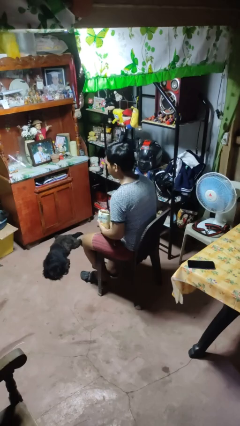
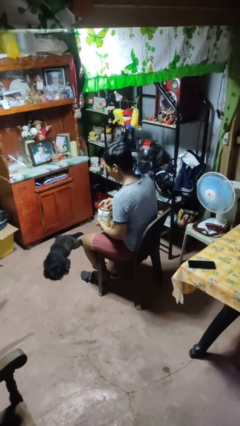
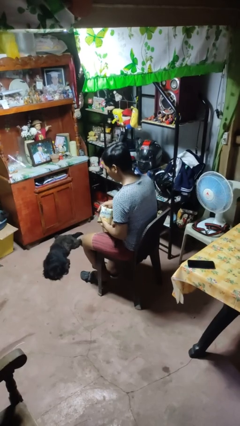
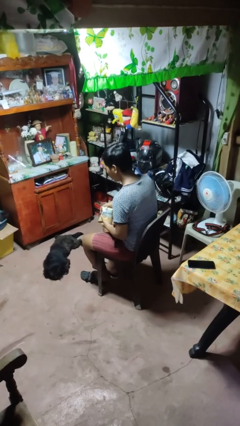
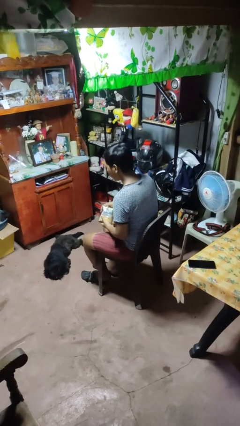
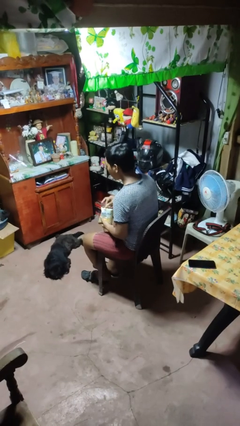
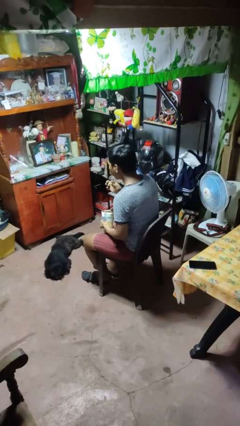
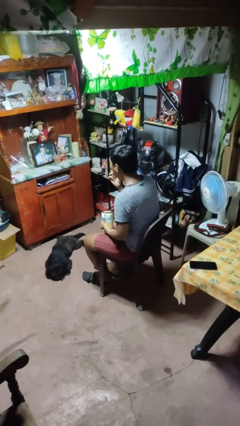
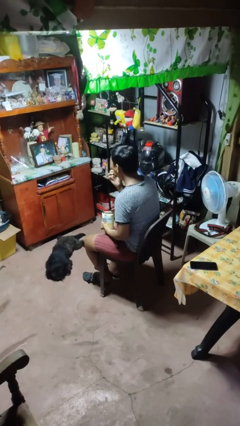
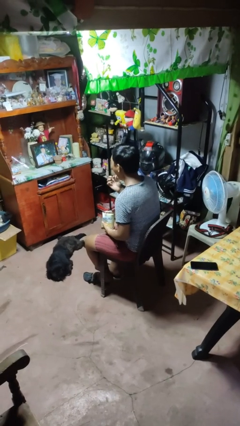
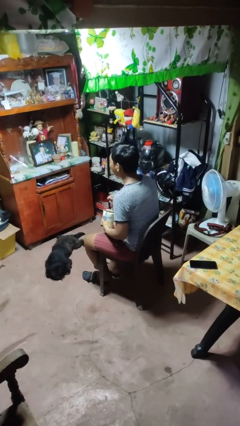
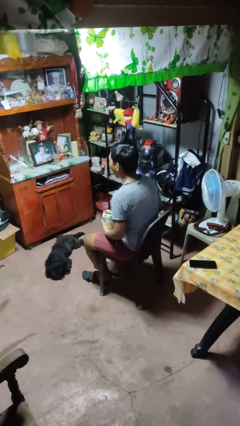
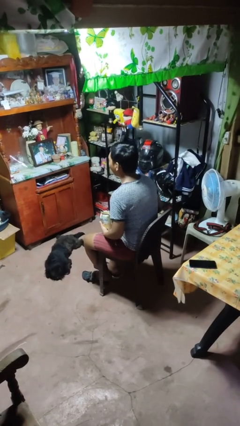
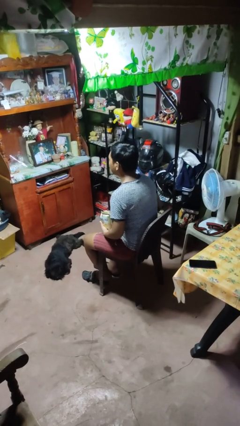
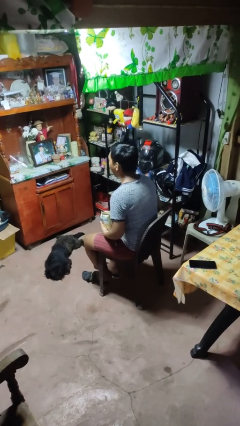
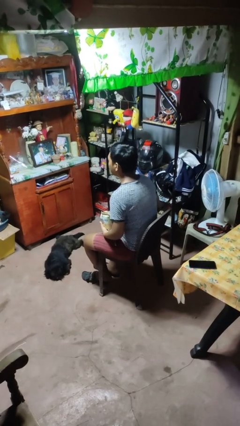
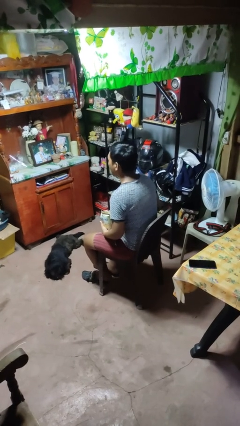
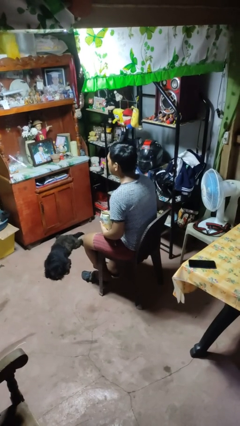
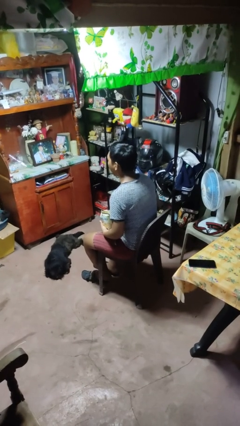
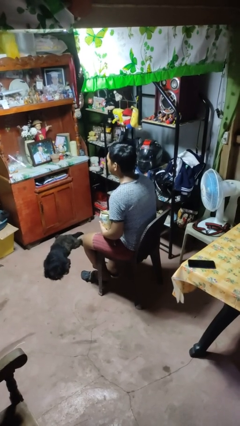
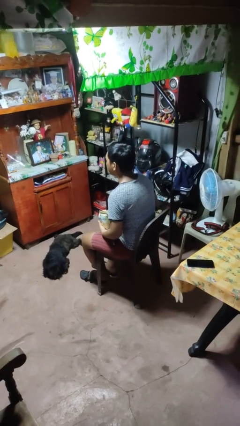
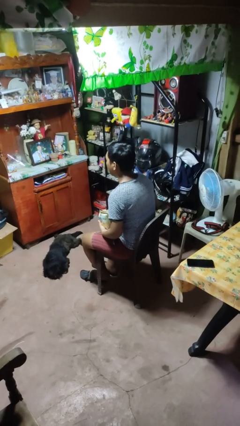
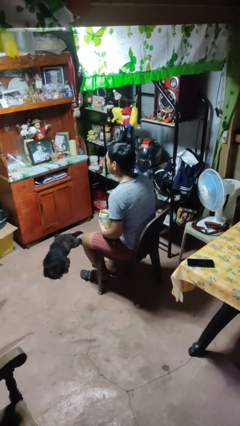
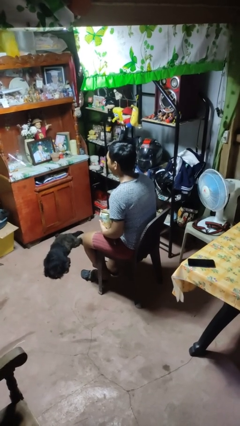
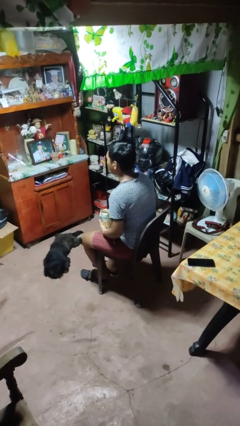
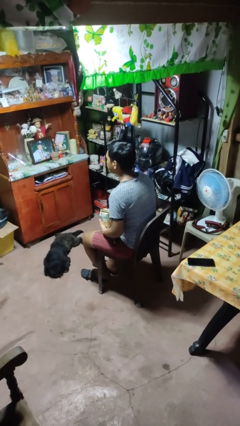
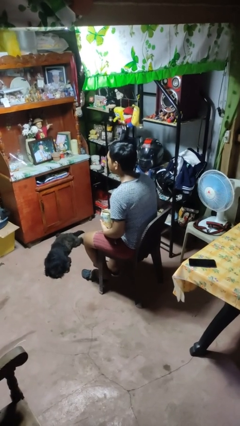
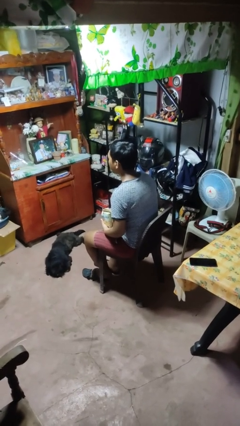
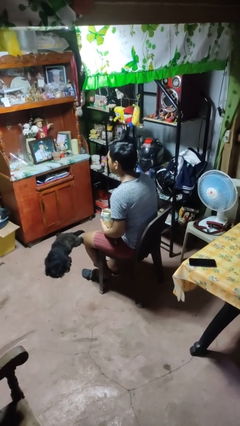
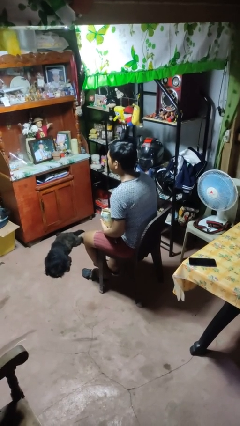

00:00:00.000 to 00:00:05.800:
person eats snack from bag

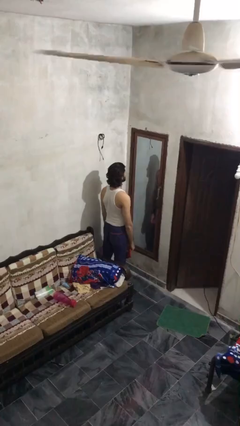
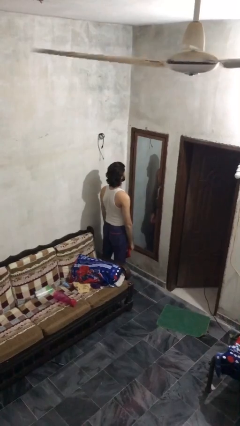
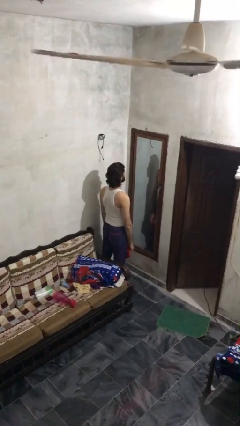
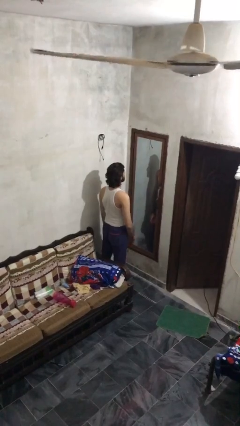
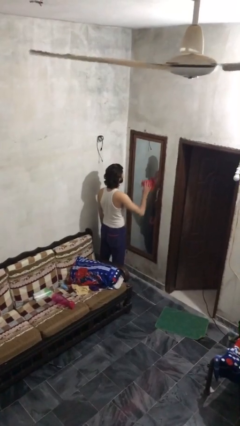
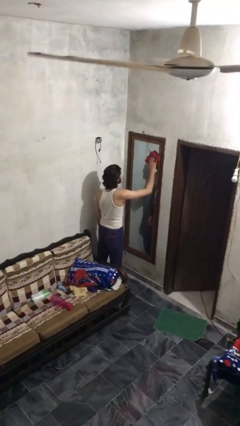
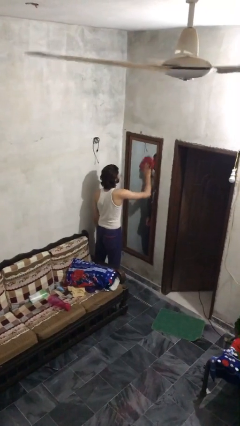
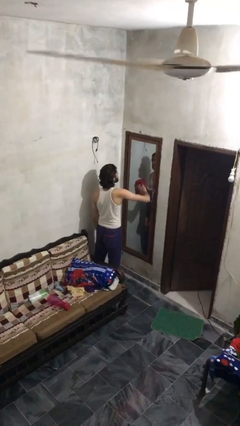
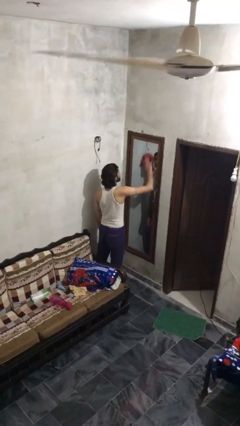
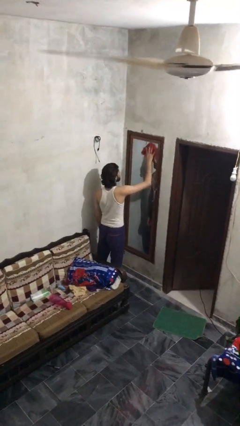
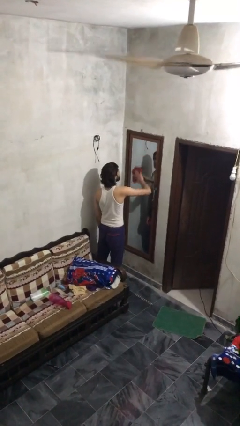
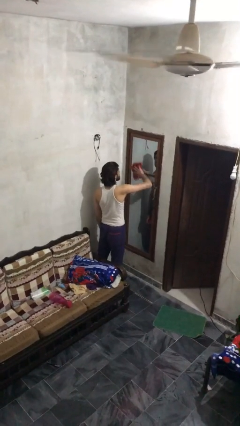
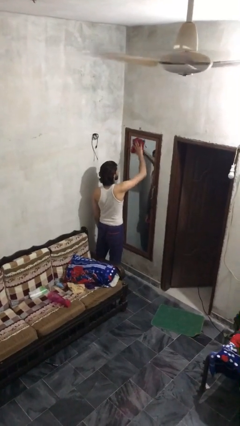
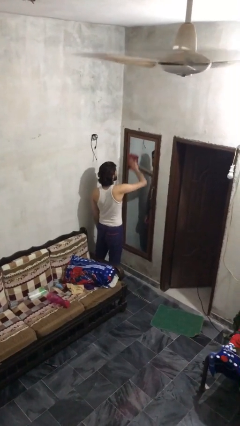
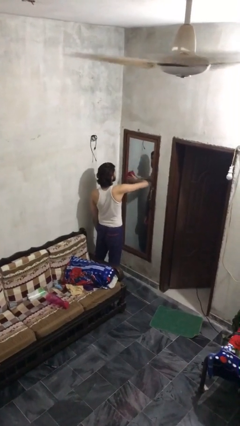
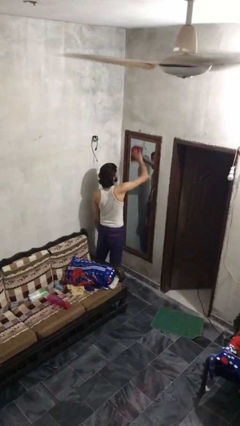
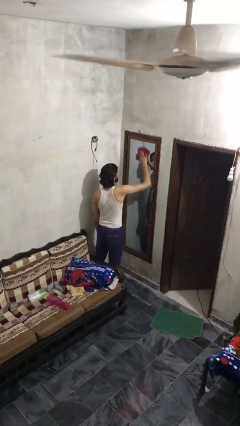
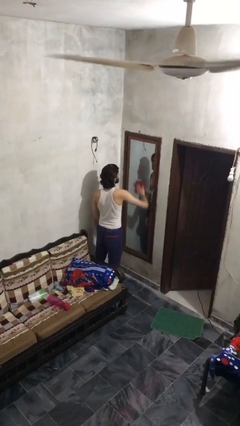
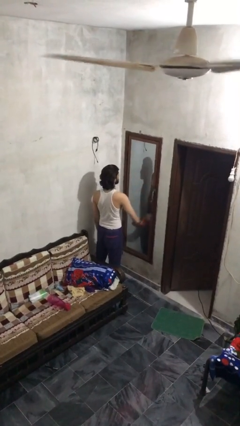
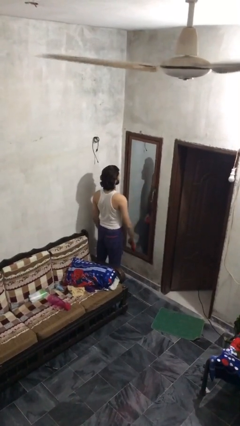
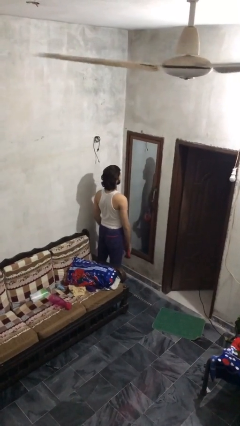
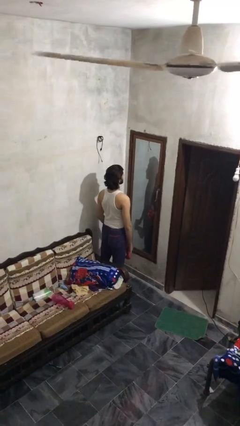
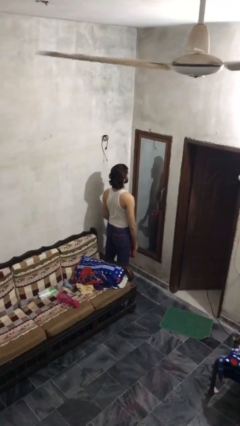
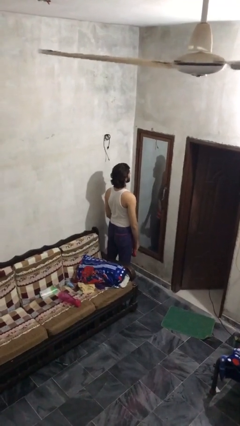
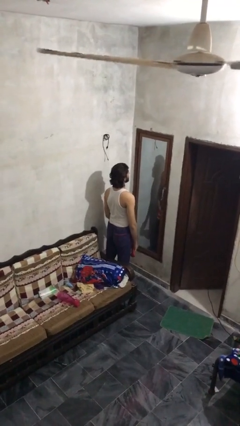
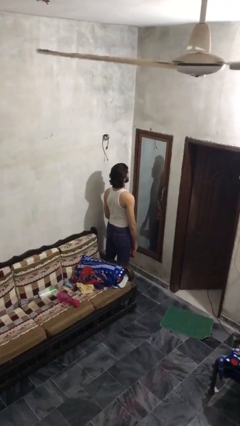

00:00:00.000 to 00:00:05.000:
person washes window

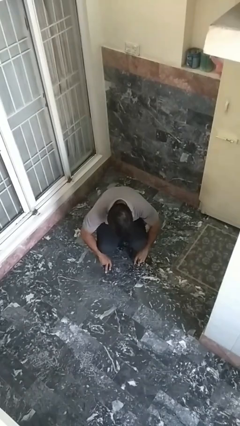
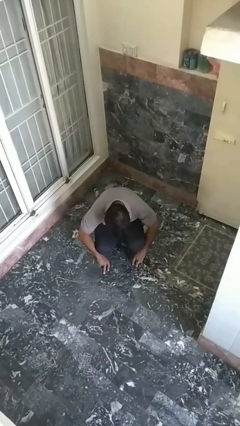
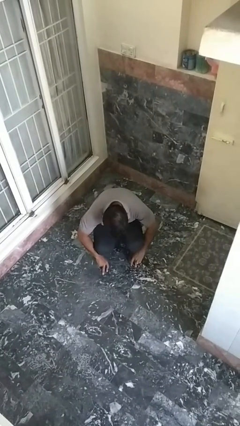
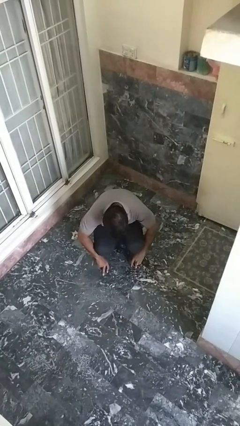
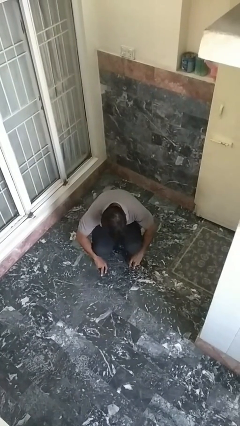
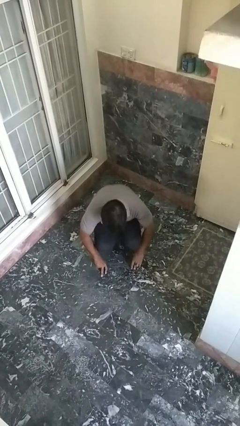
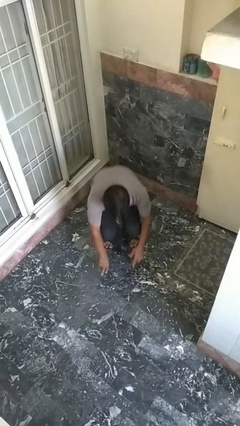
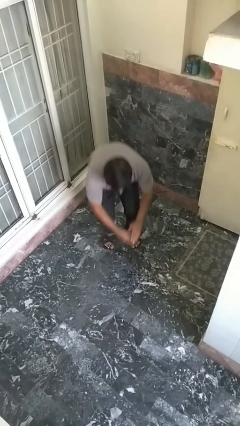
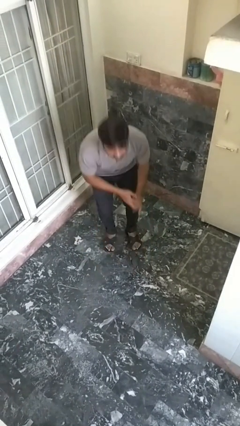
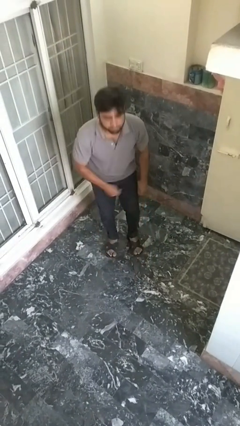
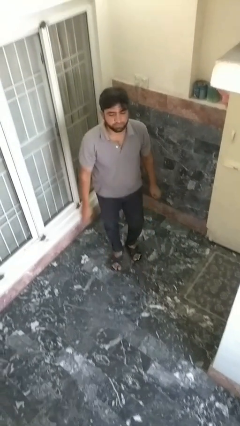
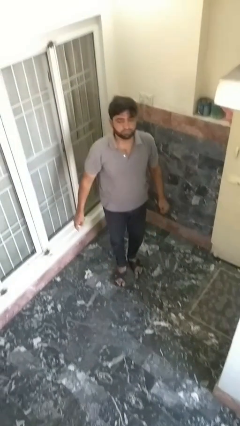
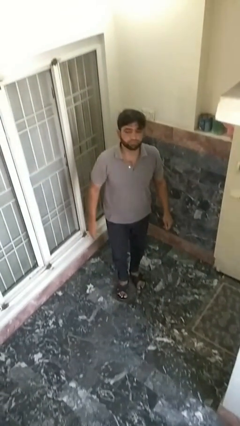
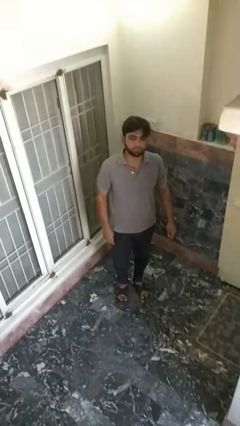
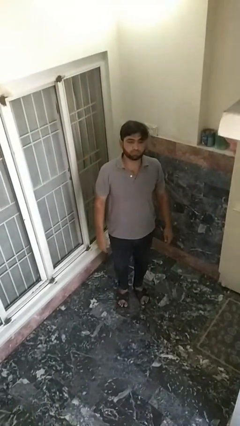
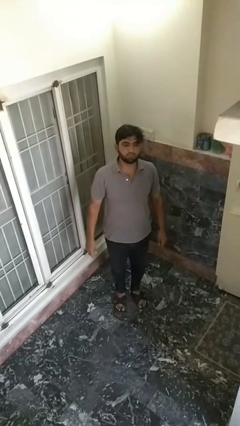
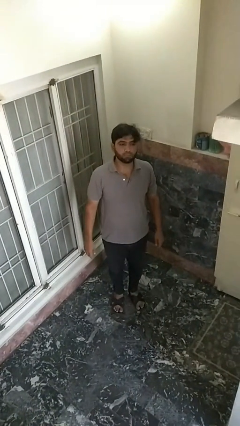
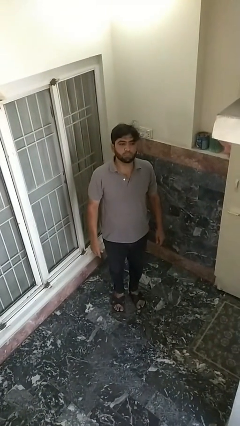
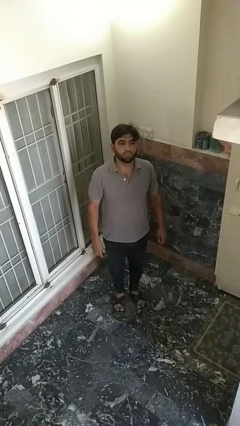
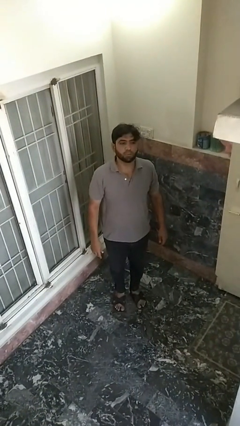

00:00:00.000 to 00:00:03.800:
person stands up from floor

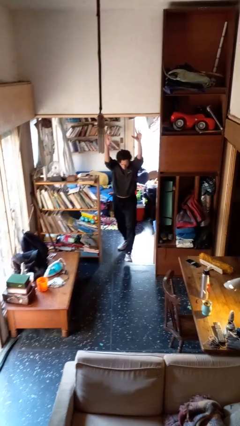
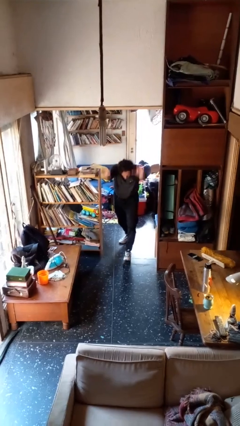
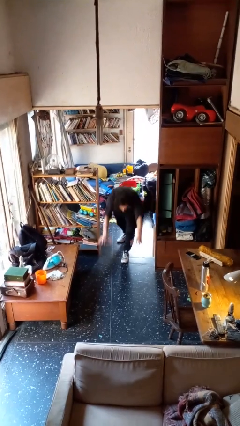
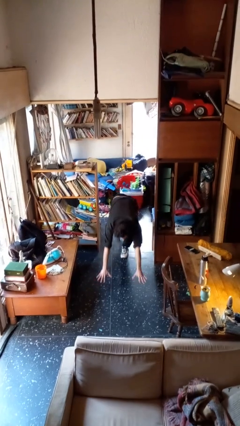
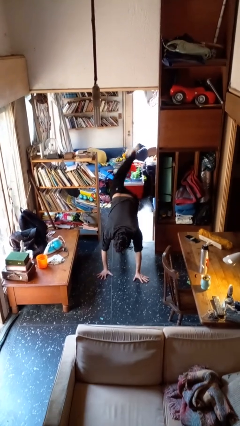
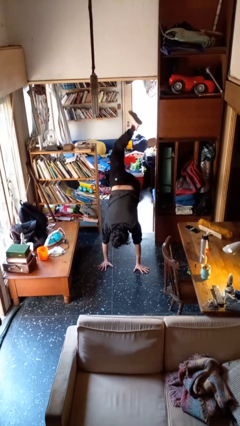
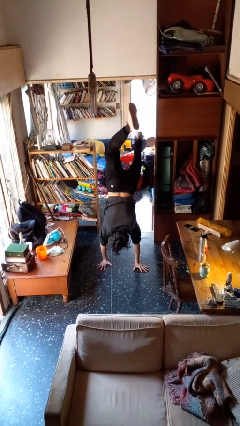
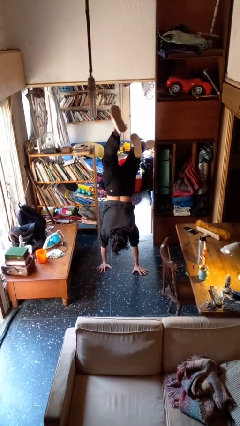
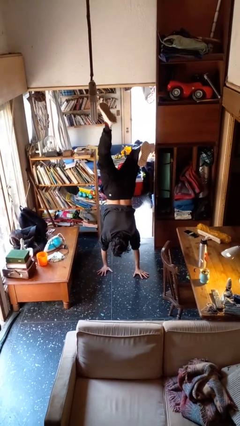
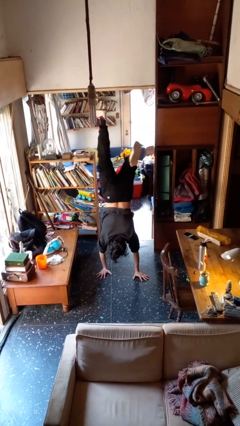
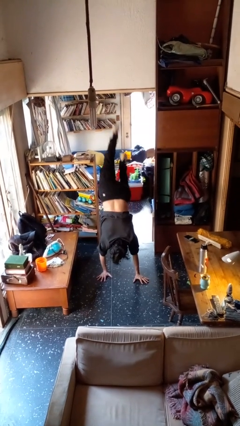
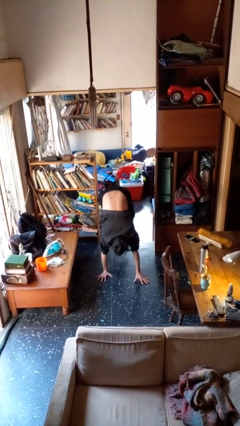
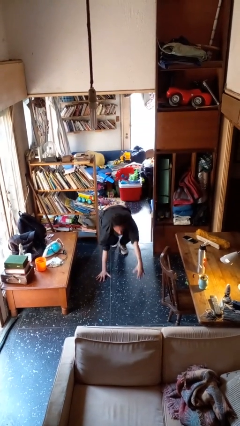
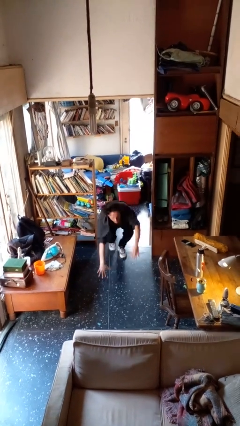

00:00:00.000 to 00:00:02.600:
person handstand

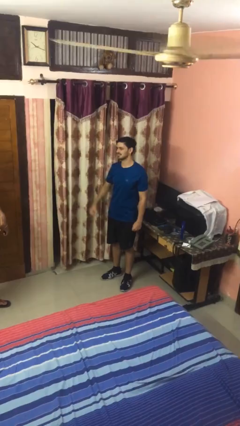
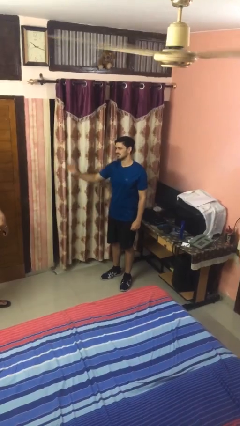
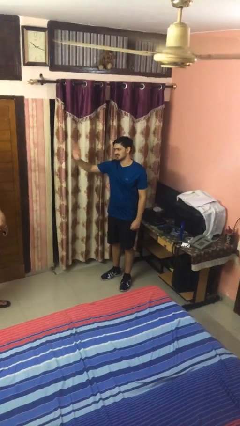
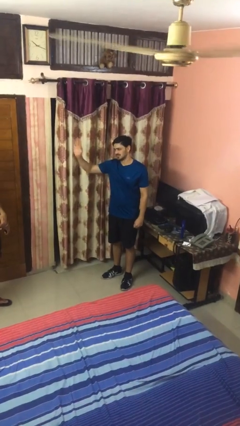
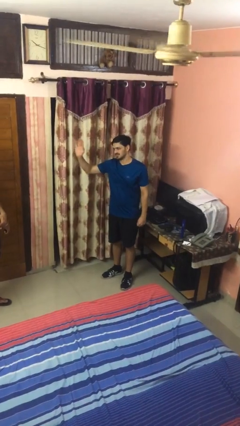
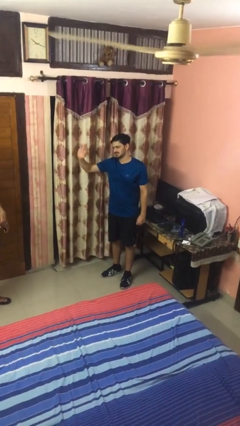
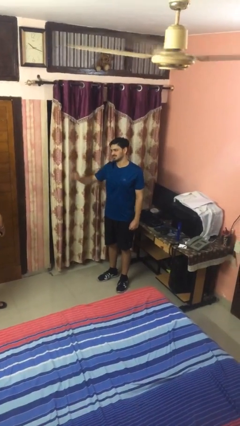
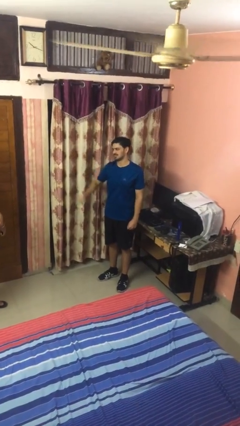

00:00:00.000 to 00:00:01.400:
person waves at person
